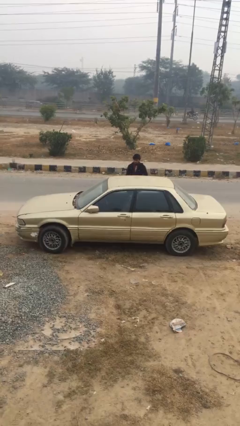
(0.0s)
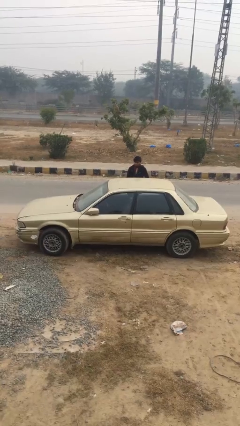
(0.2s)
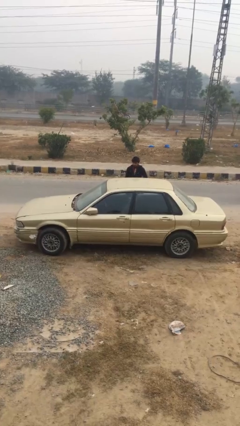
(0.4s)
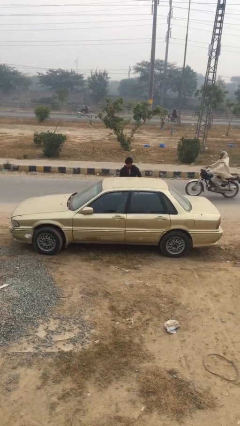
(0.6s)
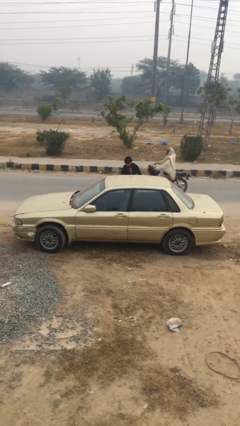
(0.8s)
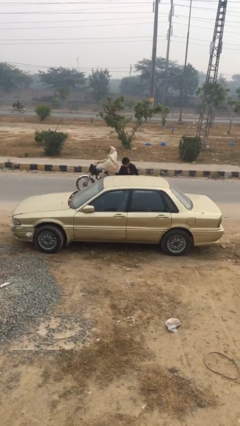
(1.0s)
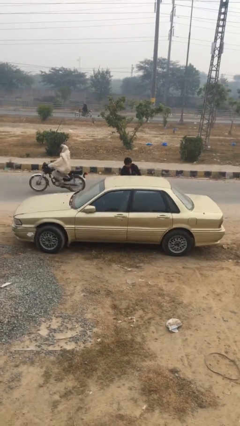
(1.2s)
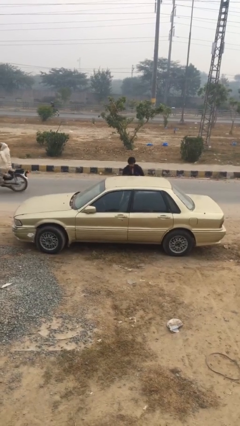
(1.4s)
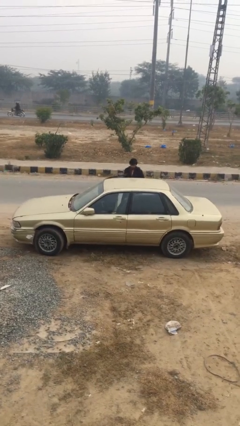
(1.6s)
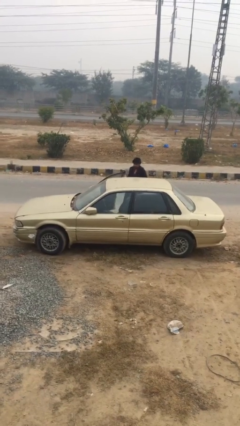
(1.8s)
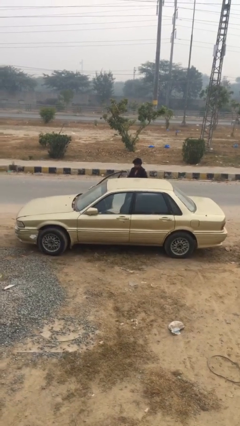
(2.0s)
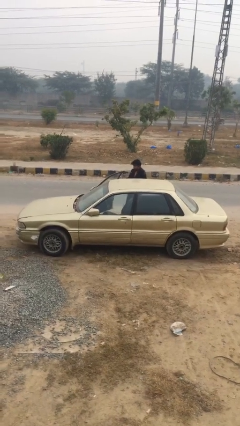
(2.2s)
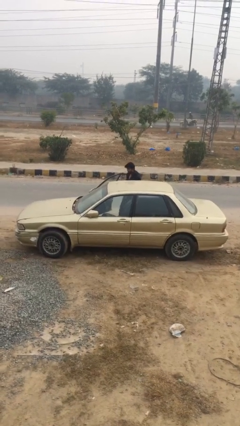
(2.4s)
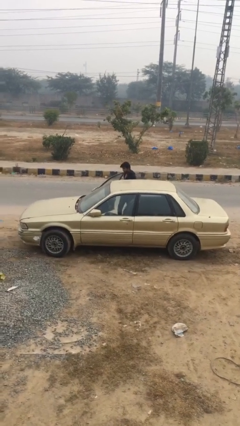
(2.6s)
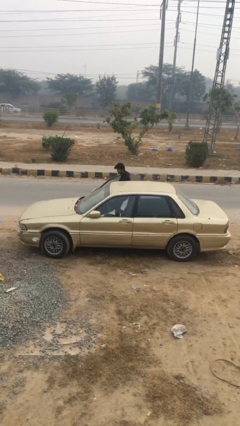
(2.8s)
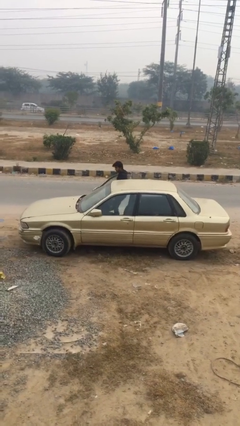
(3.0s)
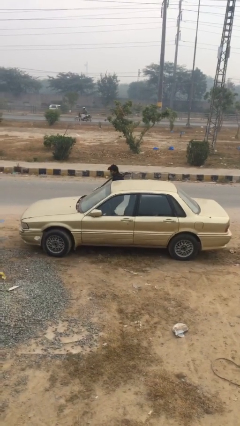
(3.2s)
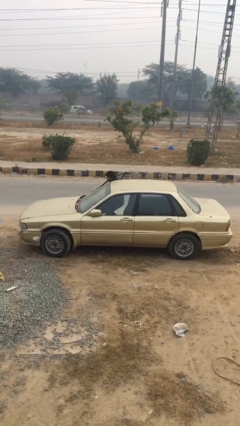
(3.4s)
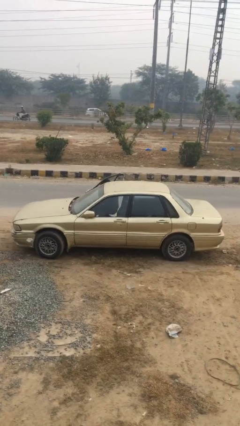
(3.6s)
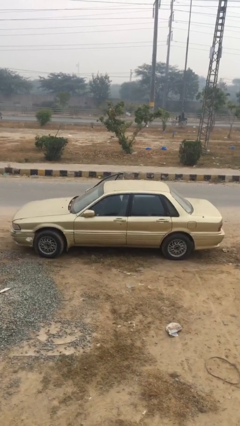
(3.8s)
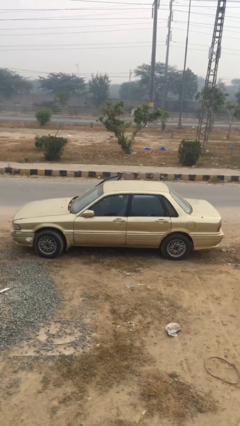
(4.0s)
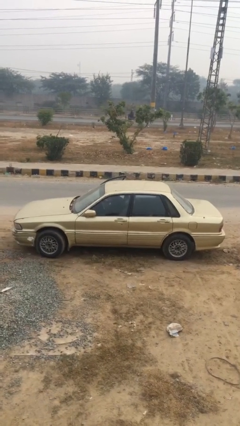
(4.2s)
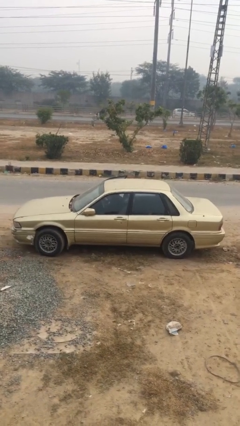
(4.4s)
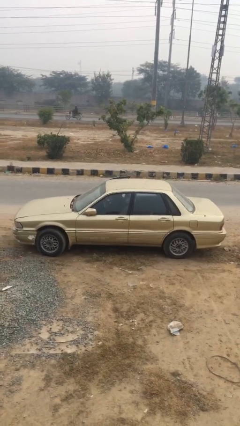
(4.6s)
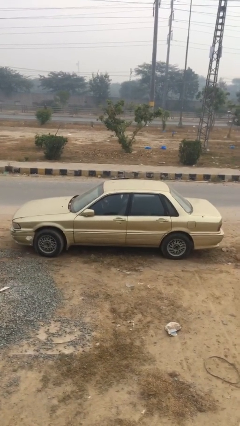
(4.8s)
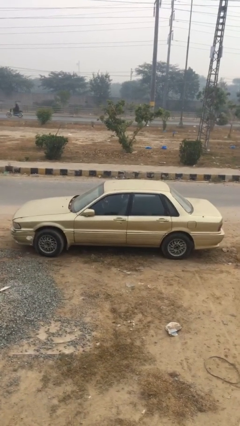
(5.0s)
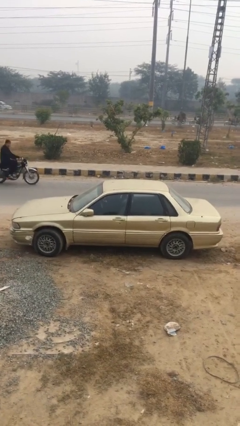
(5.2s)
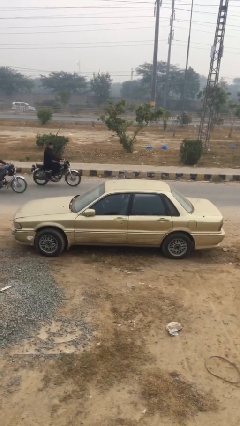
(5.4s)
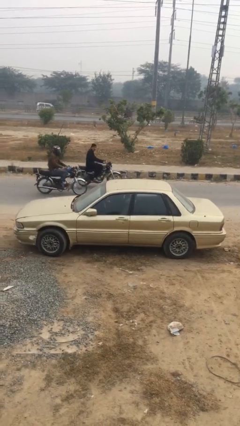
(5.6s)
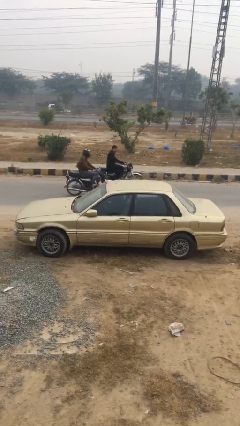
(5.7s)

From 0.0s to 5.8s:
car picks up person

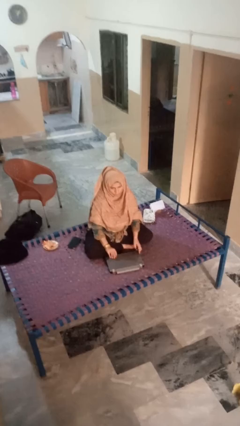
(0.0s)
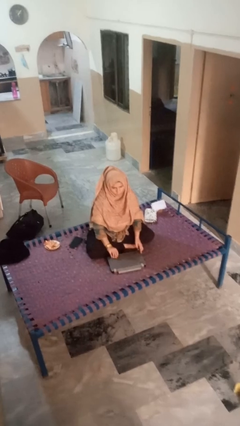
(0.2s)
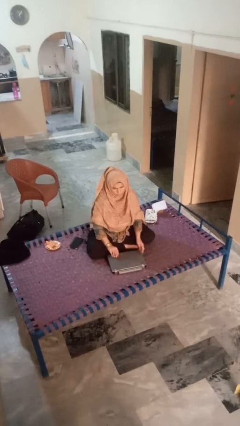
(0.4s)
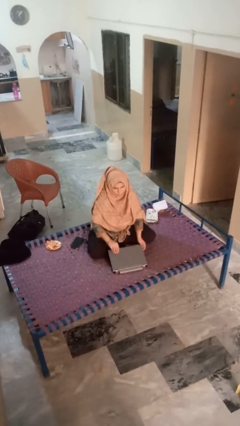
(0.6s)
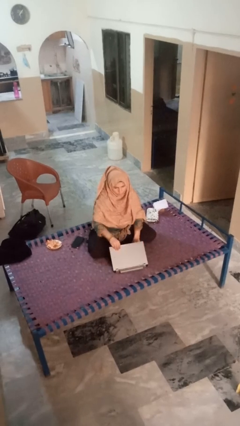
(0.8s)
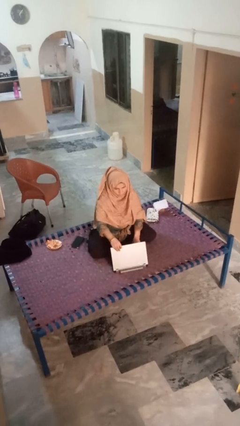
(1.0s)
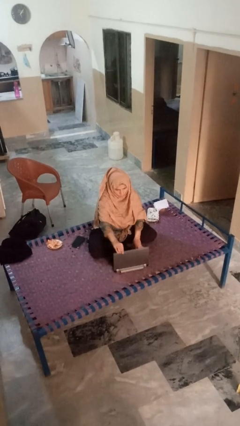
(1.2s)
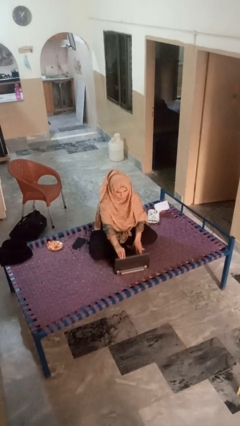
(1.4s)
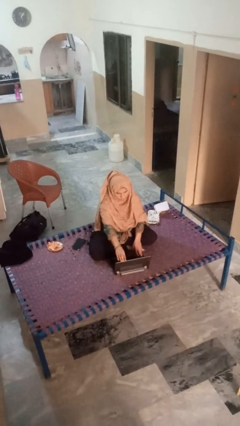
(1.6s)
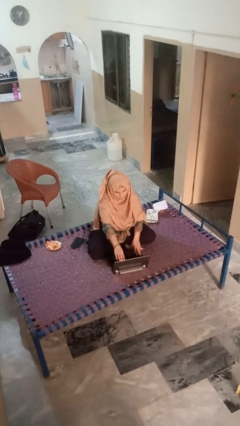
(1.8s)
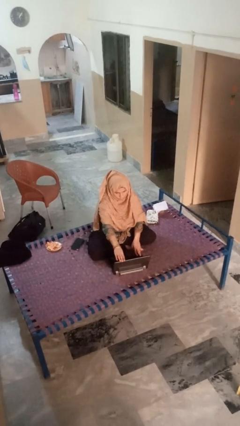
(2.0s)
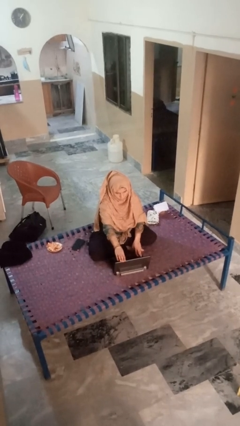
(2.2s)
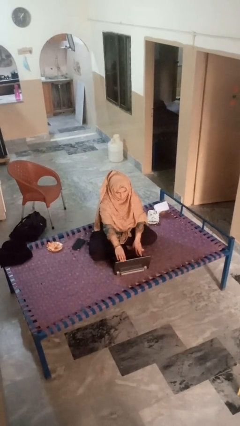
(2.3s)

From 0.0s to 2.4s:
person opens laptop

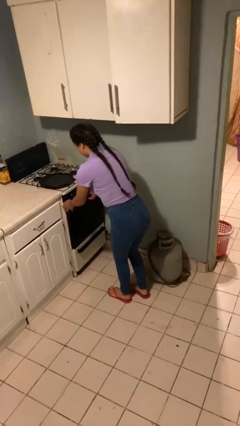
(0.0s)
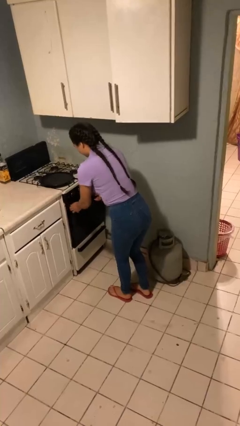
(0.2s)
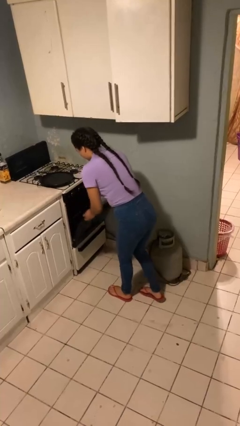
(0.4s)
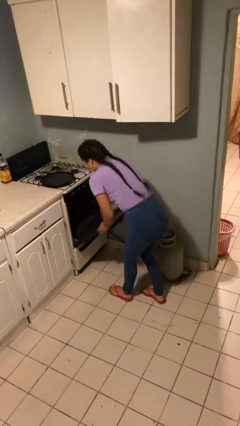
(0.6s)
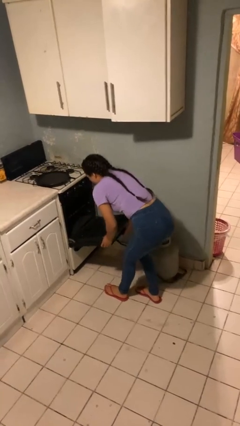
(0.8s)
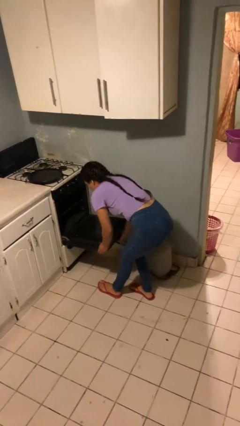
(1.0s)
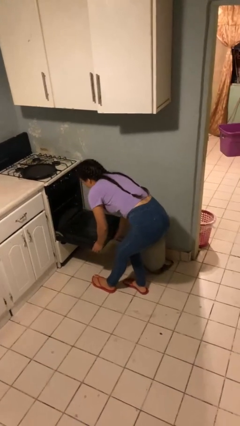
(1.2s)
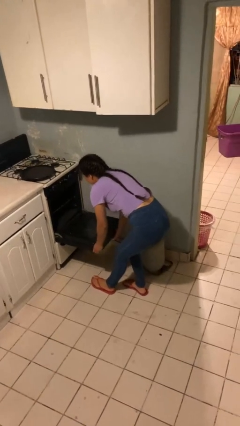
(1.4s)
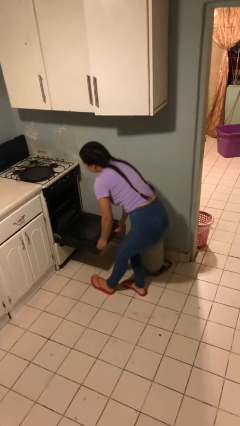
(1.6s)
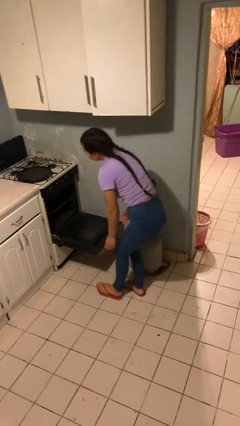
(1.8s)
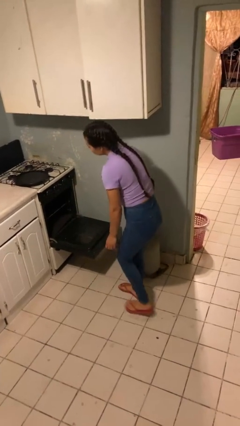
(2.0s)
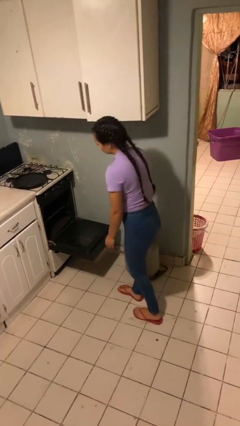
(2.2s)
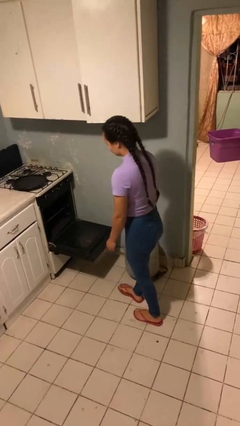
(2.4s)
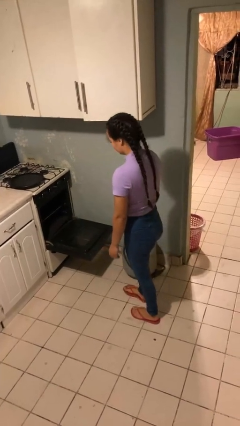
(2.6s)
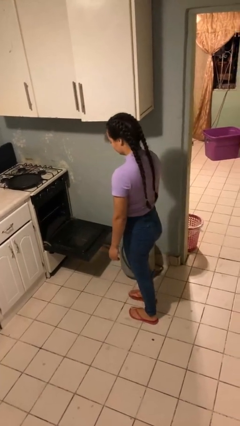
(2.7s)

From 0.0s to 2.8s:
person opens oven door

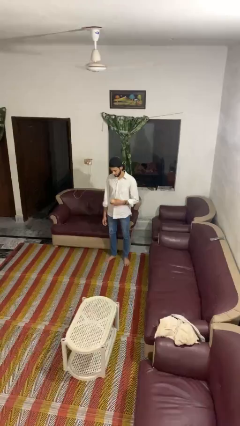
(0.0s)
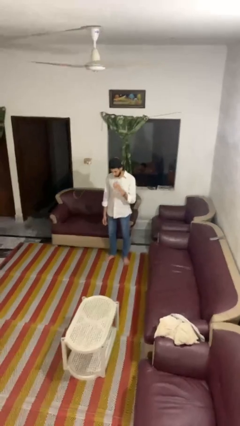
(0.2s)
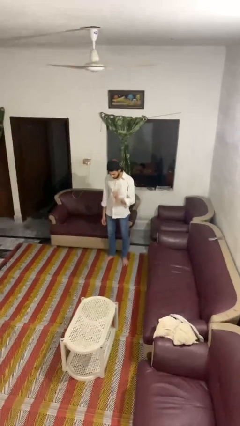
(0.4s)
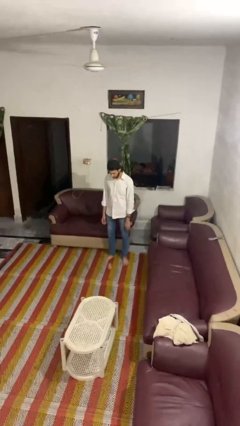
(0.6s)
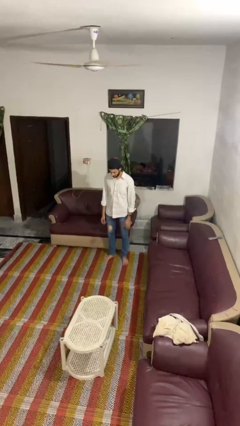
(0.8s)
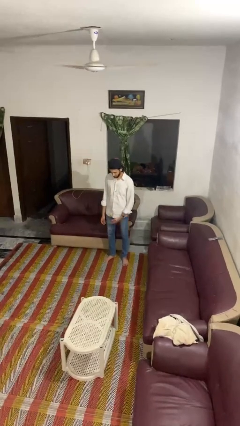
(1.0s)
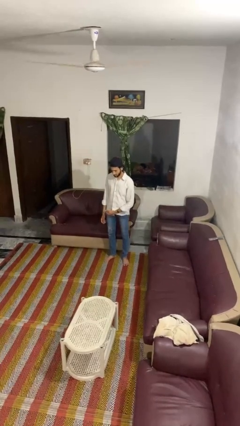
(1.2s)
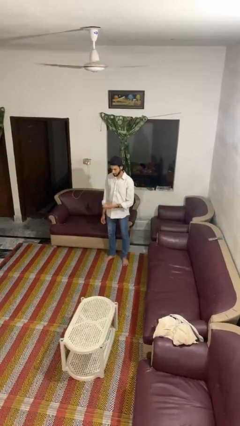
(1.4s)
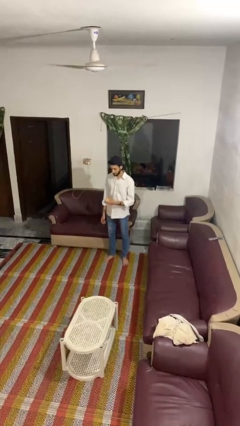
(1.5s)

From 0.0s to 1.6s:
person bounces ball on floor

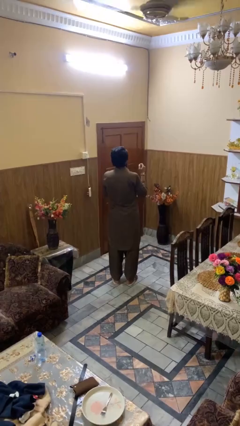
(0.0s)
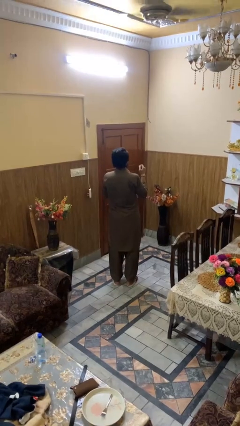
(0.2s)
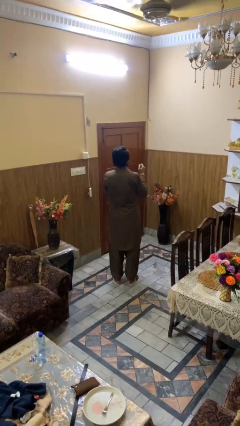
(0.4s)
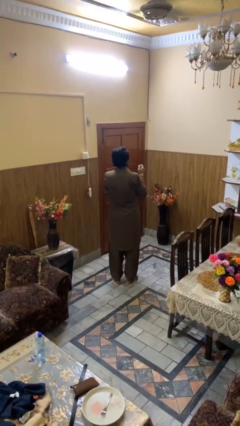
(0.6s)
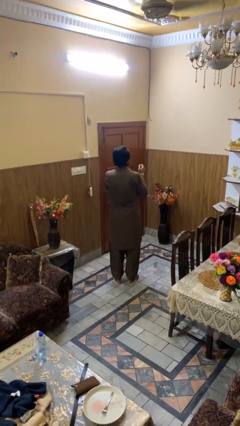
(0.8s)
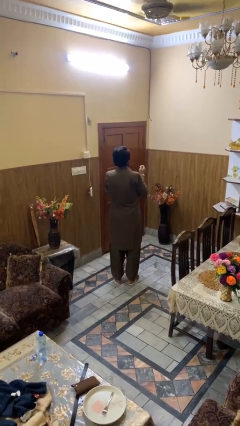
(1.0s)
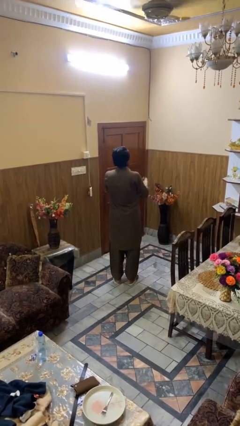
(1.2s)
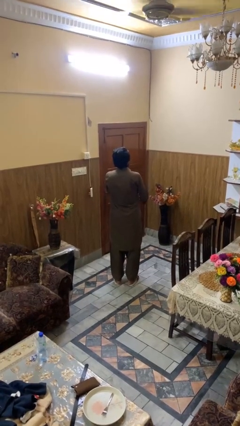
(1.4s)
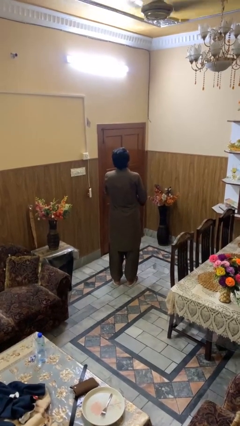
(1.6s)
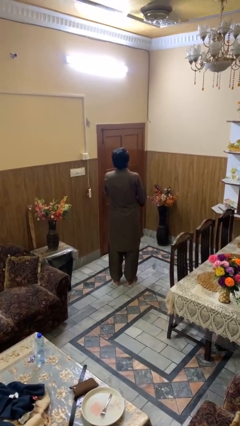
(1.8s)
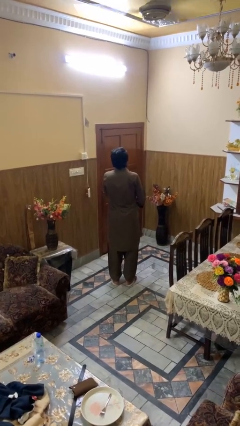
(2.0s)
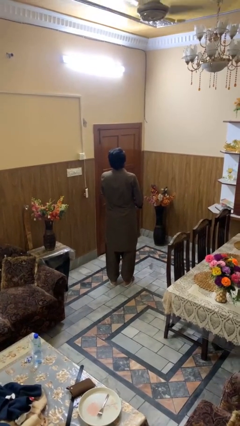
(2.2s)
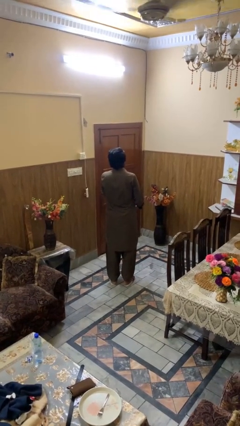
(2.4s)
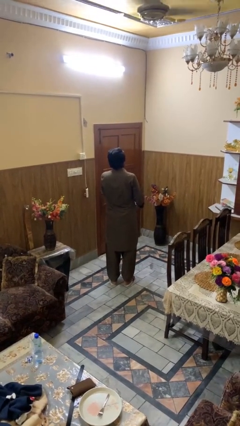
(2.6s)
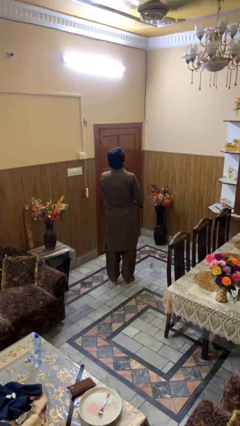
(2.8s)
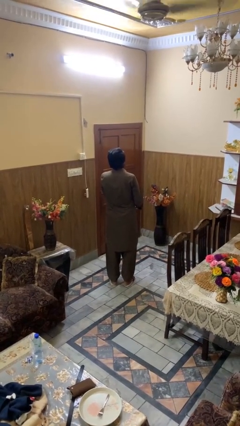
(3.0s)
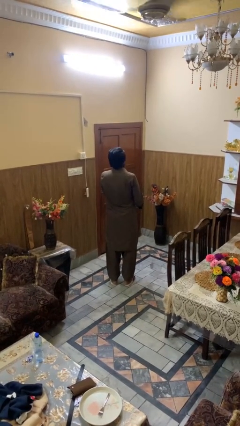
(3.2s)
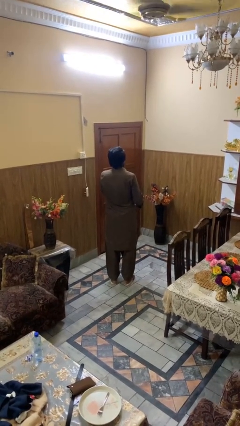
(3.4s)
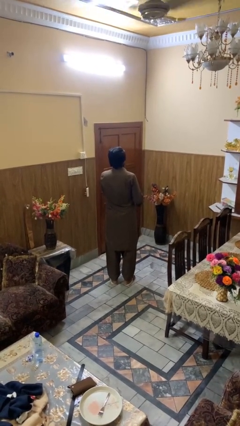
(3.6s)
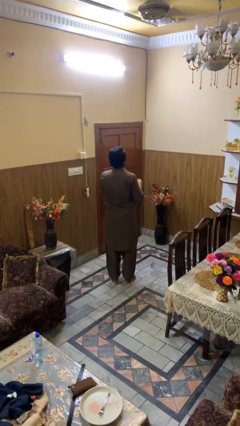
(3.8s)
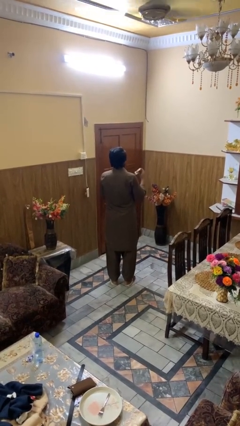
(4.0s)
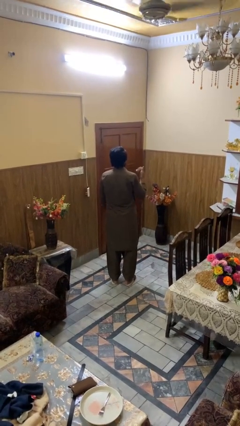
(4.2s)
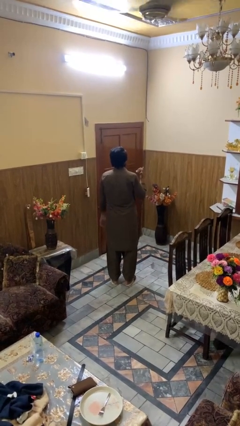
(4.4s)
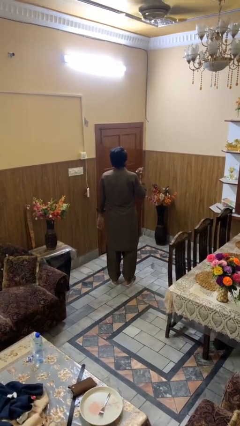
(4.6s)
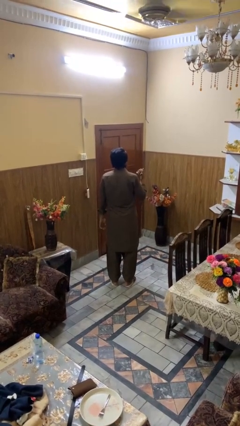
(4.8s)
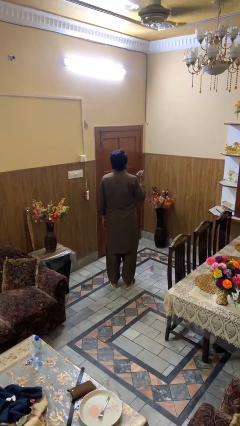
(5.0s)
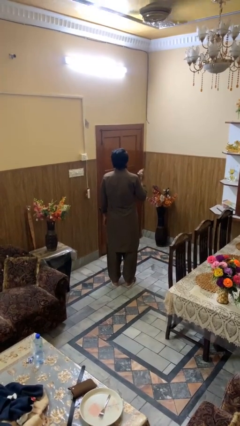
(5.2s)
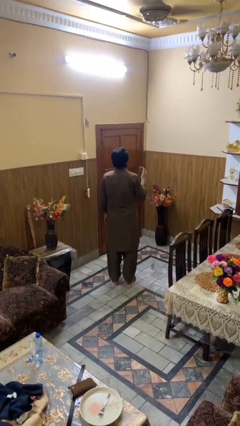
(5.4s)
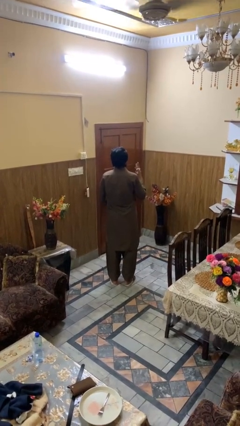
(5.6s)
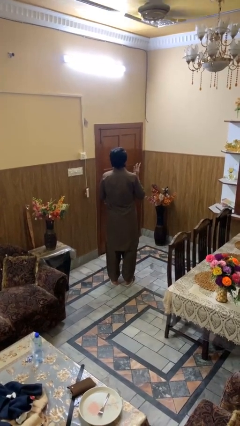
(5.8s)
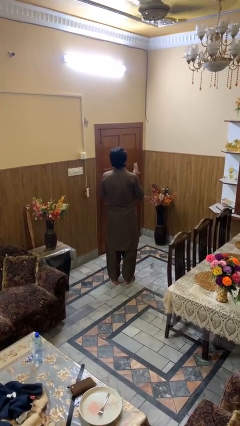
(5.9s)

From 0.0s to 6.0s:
person takes off wristwatch
